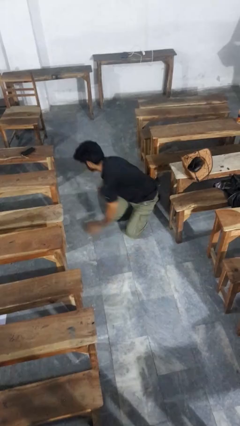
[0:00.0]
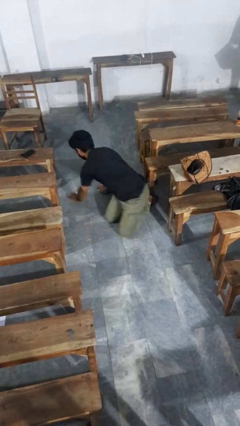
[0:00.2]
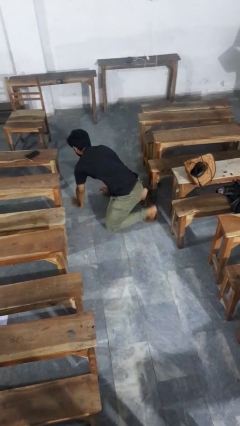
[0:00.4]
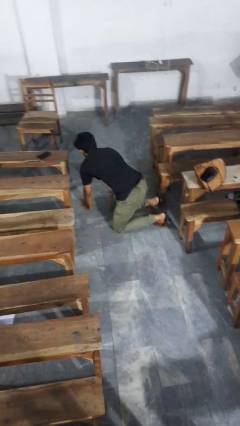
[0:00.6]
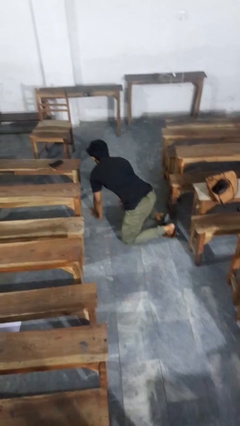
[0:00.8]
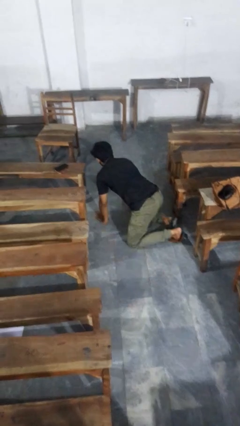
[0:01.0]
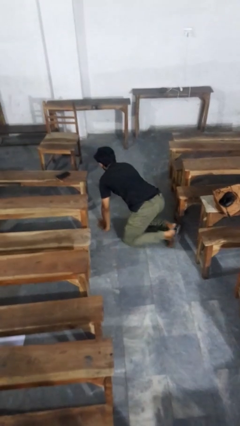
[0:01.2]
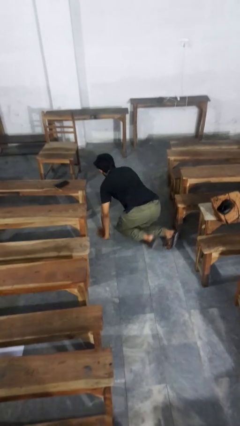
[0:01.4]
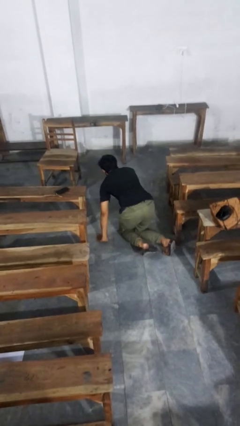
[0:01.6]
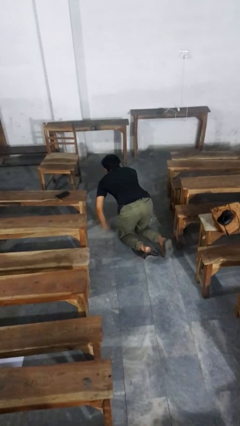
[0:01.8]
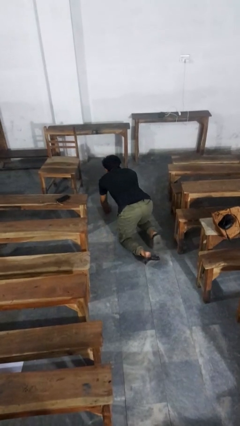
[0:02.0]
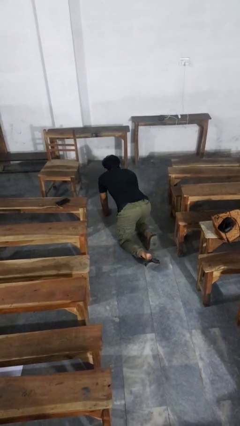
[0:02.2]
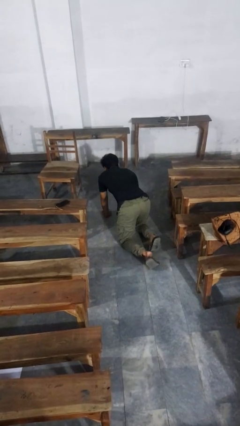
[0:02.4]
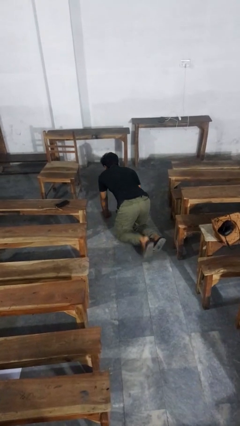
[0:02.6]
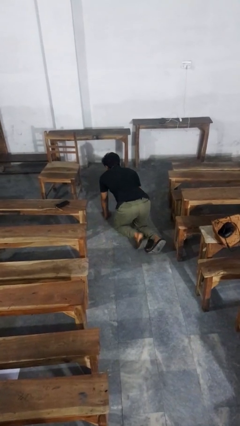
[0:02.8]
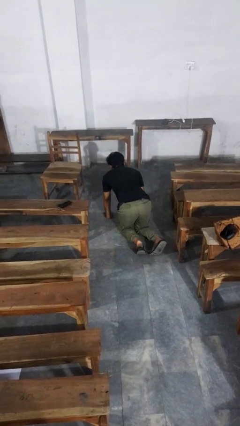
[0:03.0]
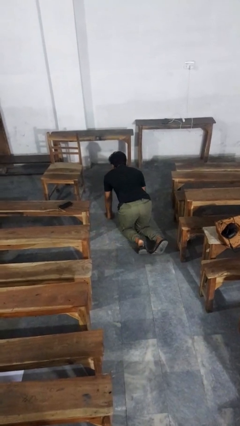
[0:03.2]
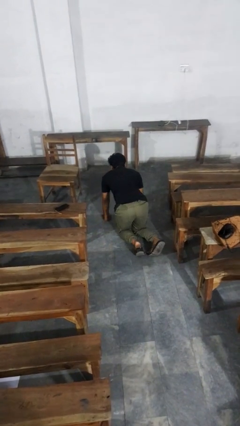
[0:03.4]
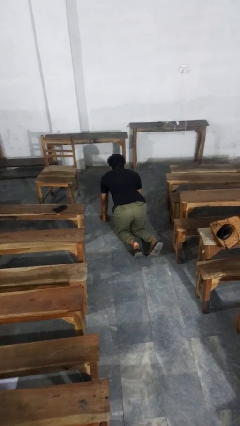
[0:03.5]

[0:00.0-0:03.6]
person crawls

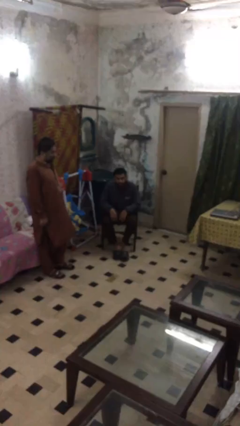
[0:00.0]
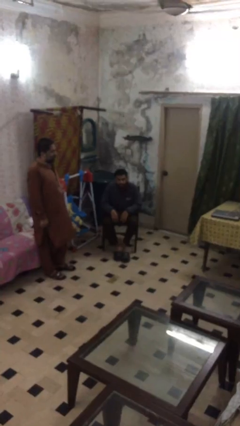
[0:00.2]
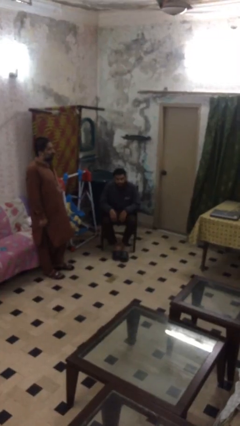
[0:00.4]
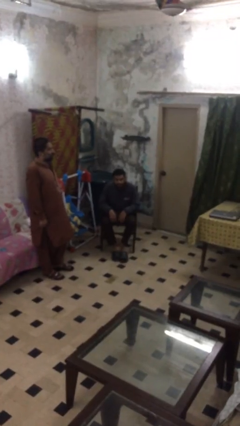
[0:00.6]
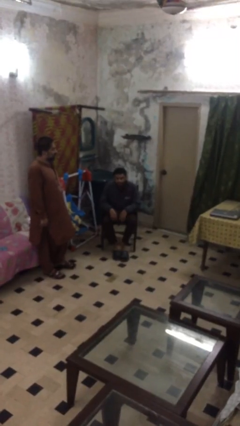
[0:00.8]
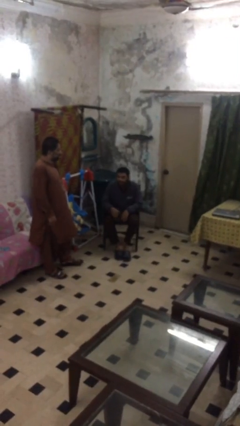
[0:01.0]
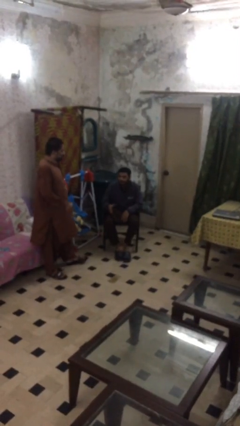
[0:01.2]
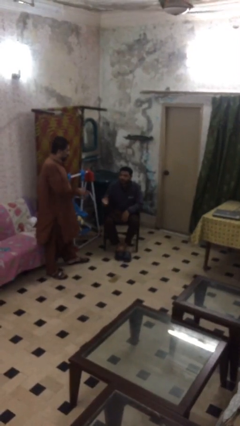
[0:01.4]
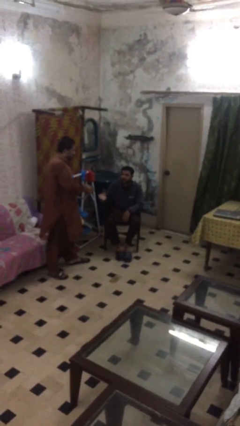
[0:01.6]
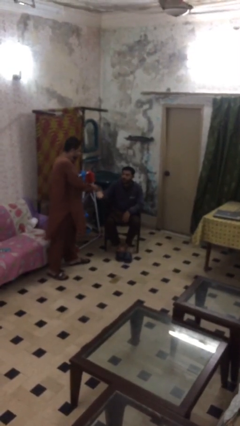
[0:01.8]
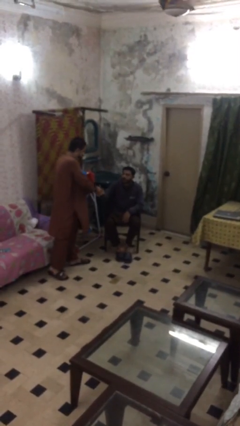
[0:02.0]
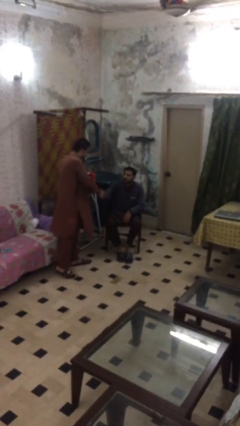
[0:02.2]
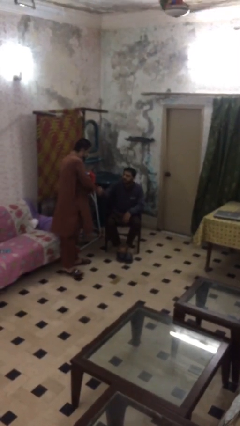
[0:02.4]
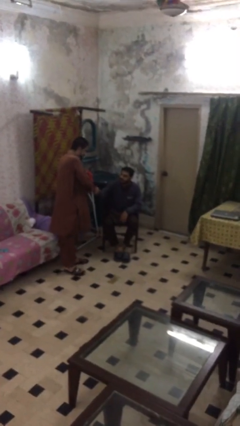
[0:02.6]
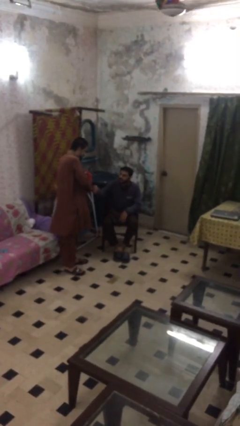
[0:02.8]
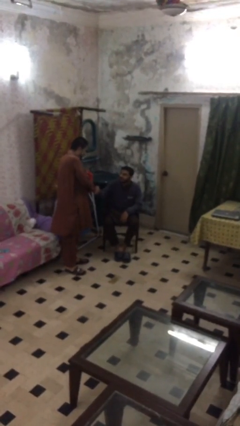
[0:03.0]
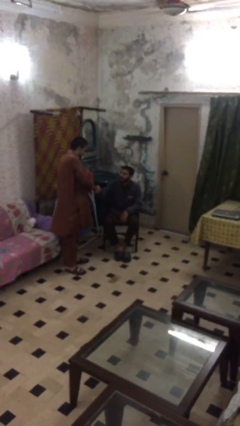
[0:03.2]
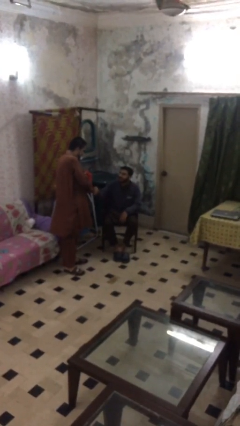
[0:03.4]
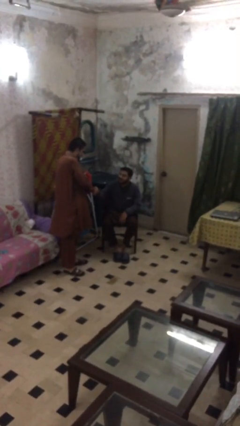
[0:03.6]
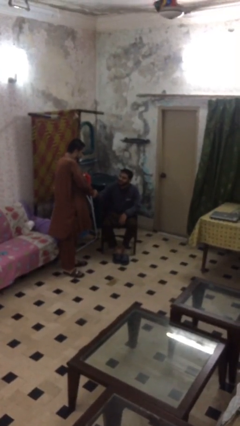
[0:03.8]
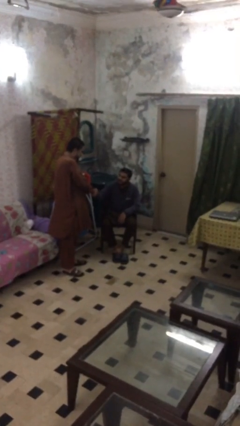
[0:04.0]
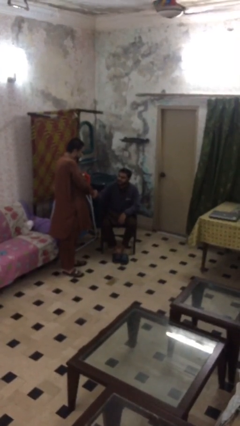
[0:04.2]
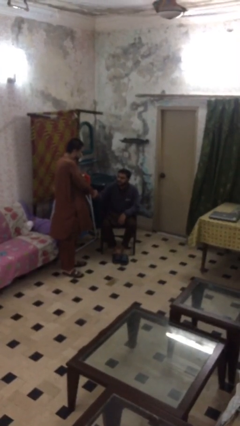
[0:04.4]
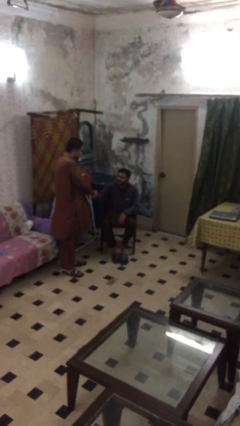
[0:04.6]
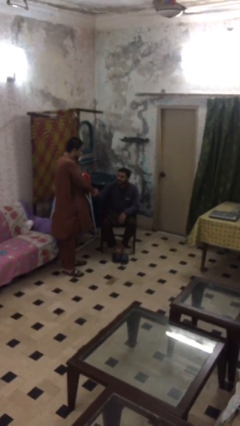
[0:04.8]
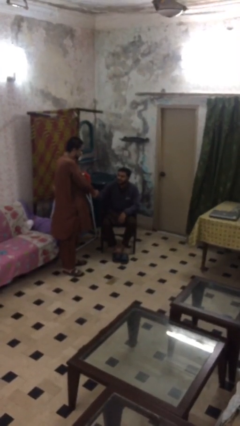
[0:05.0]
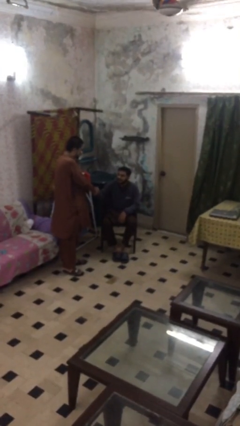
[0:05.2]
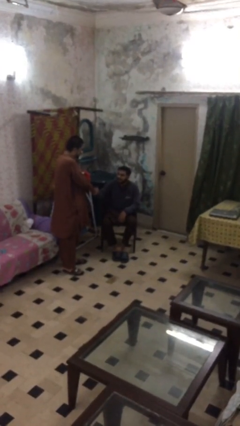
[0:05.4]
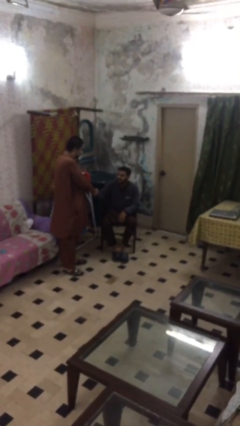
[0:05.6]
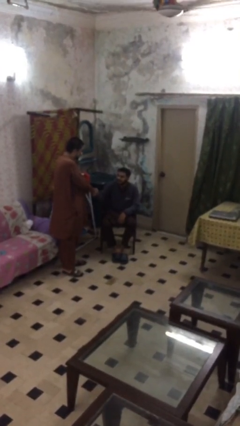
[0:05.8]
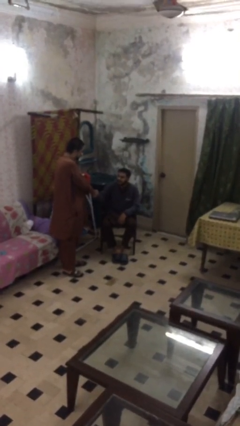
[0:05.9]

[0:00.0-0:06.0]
person shakes hand

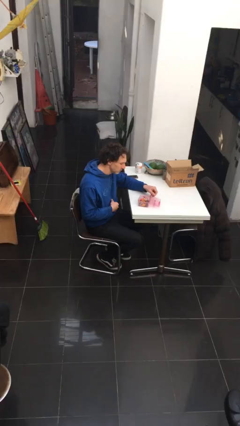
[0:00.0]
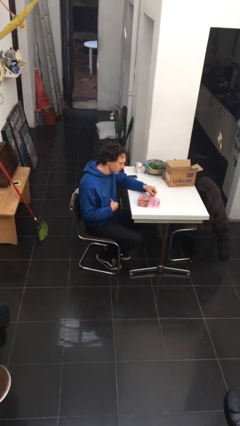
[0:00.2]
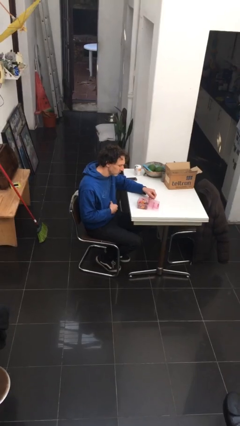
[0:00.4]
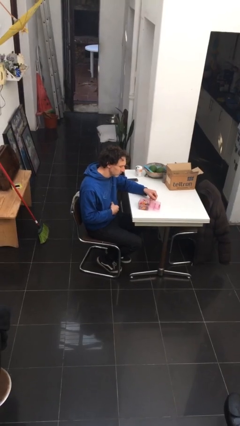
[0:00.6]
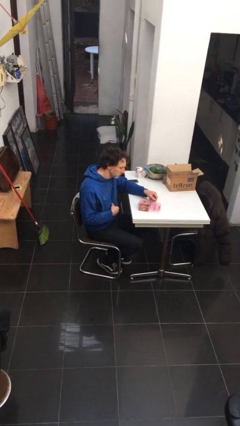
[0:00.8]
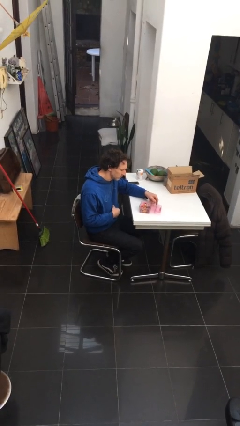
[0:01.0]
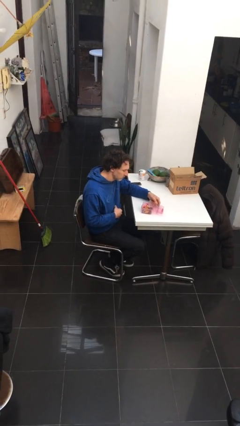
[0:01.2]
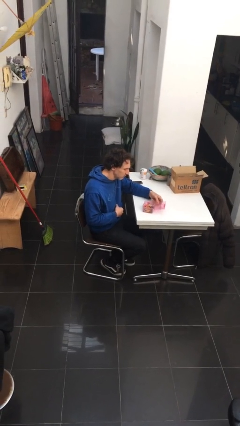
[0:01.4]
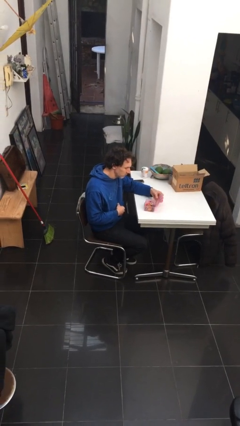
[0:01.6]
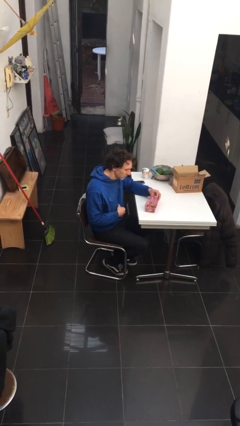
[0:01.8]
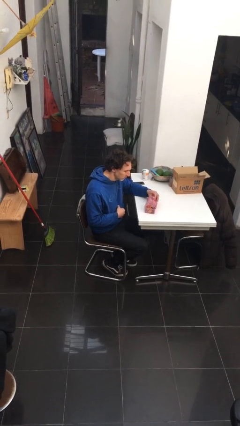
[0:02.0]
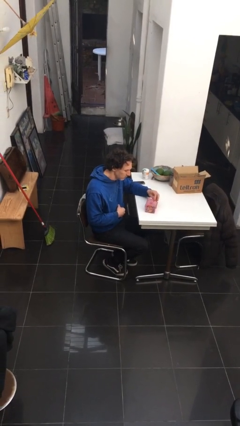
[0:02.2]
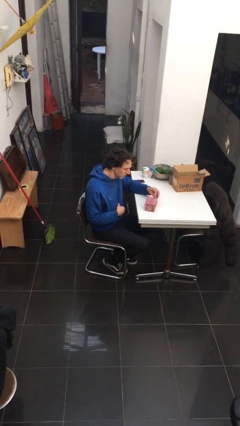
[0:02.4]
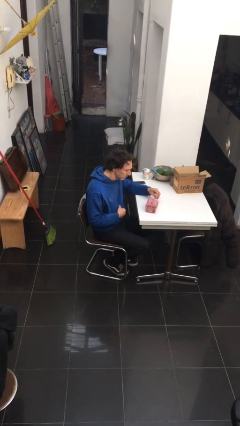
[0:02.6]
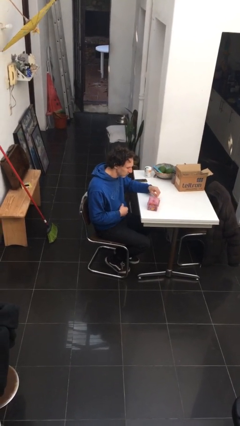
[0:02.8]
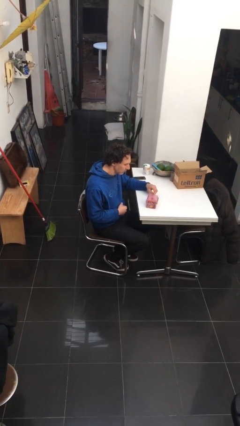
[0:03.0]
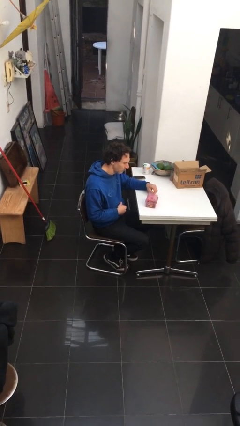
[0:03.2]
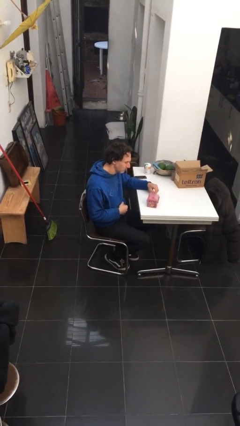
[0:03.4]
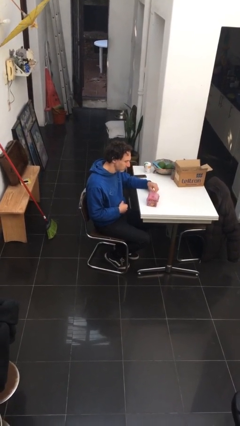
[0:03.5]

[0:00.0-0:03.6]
person closes jewelry box

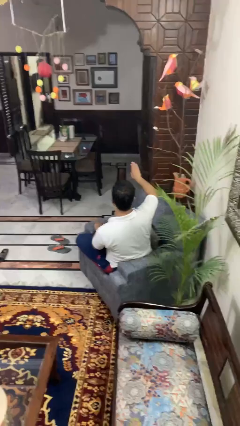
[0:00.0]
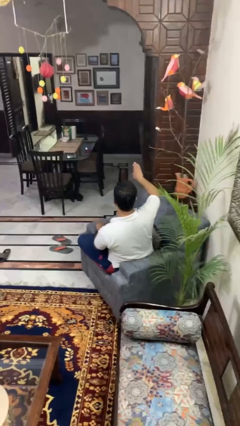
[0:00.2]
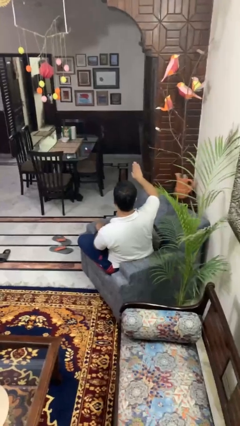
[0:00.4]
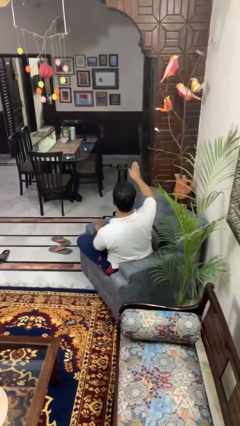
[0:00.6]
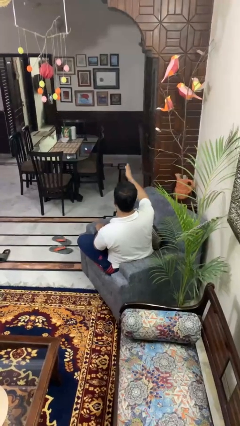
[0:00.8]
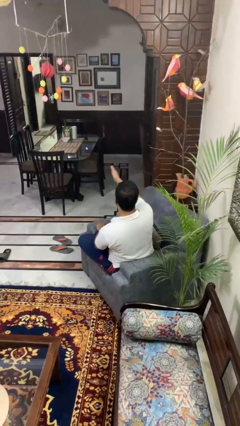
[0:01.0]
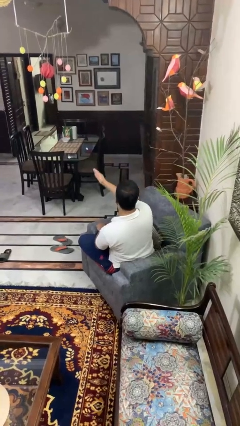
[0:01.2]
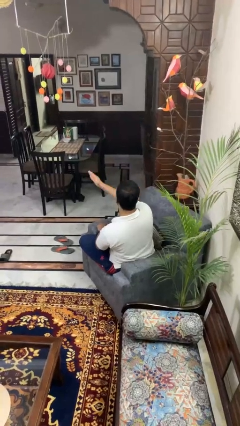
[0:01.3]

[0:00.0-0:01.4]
person gestures swipe left

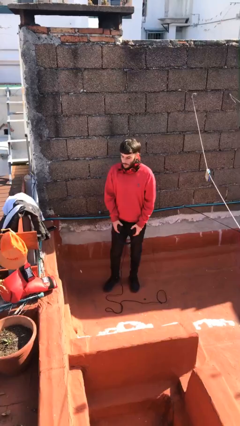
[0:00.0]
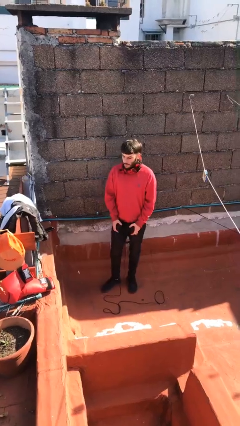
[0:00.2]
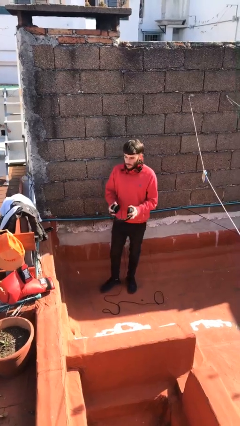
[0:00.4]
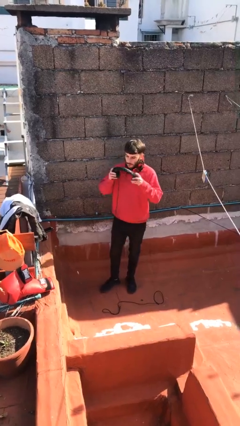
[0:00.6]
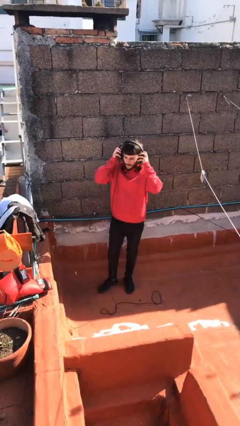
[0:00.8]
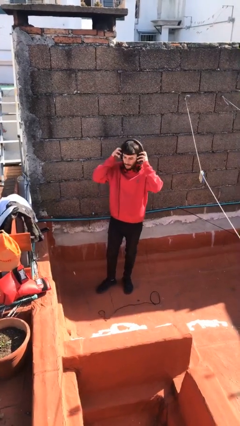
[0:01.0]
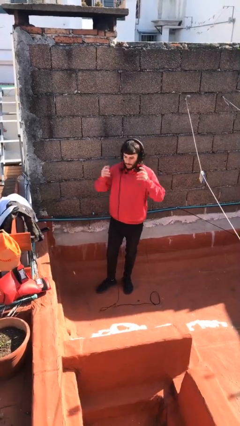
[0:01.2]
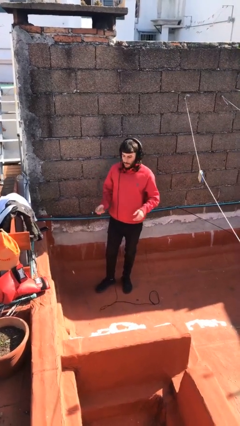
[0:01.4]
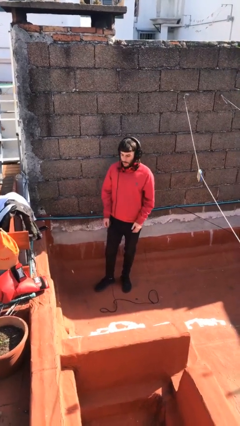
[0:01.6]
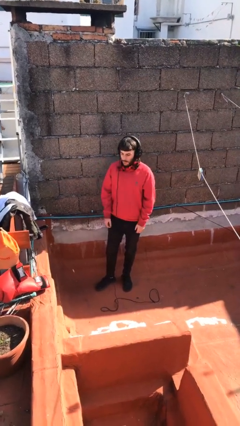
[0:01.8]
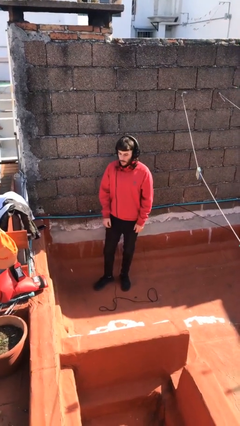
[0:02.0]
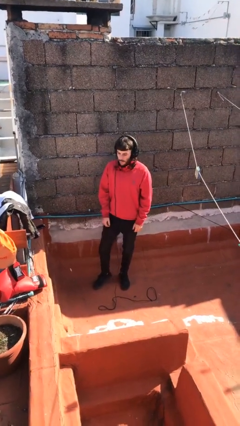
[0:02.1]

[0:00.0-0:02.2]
person puts on headphones

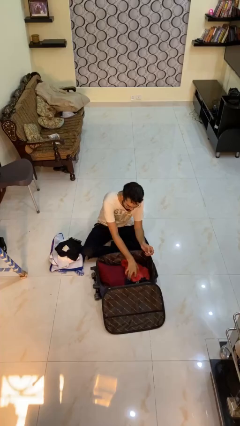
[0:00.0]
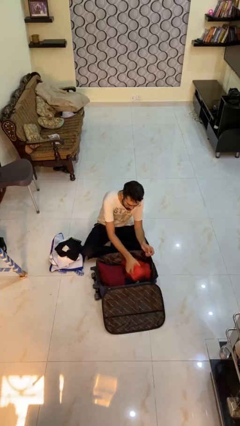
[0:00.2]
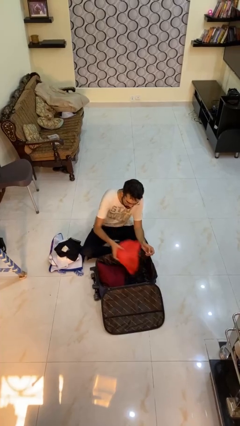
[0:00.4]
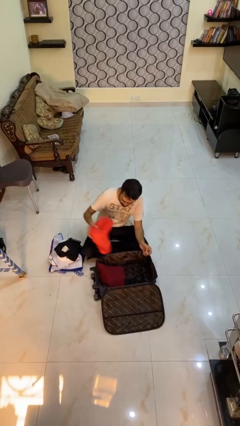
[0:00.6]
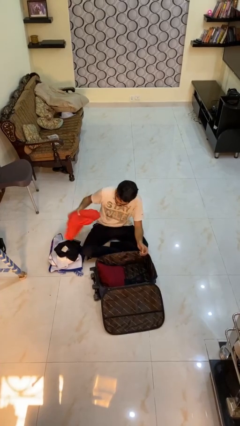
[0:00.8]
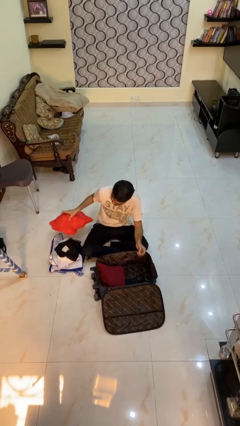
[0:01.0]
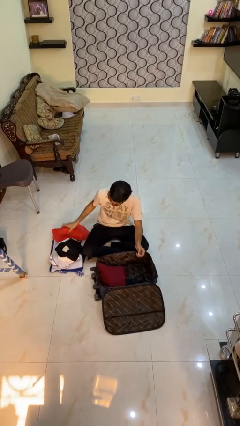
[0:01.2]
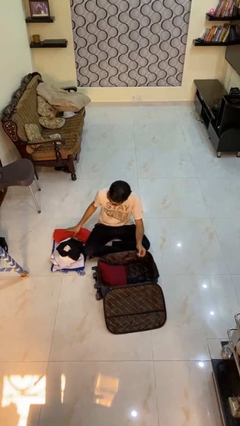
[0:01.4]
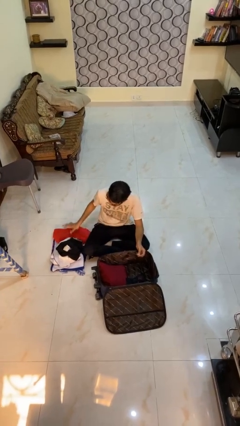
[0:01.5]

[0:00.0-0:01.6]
person unloads clothes from suitcase
